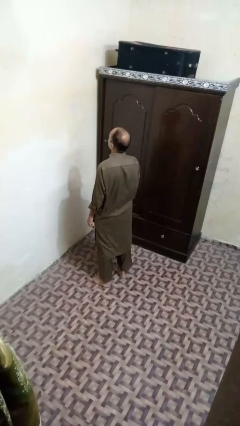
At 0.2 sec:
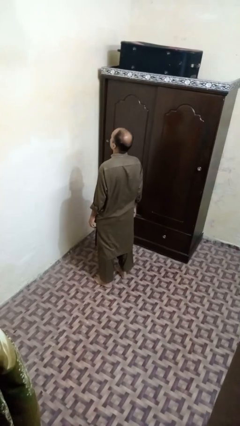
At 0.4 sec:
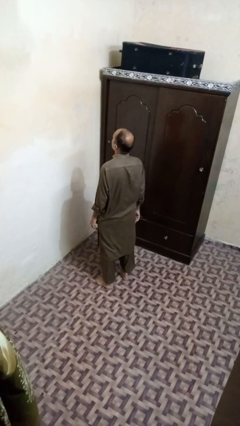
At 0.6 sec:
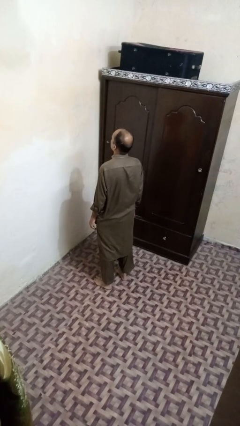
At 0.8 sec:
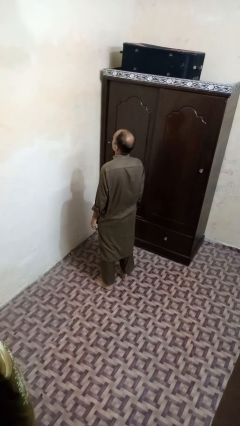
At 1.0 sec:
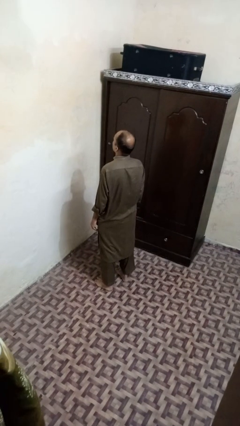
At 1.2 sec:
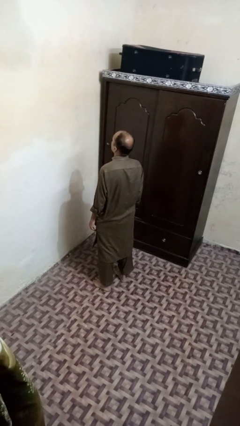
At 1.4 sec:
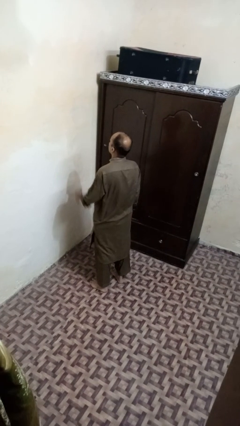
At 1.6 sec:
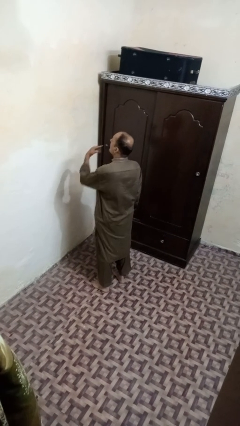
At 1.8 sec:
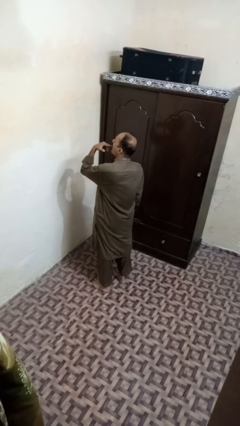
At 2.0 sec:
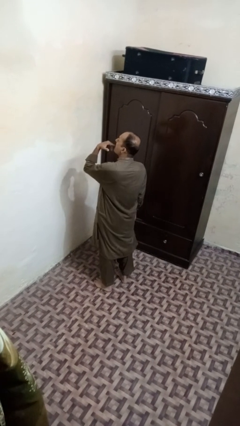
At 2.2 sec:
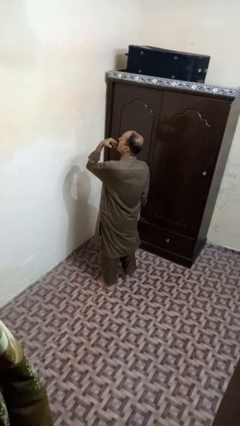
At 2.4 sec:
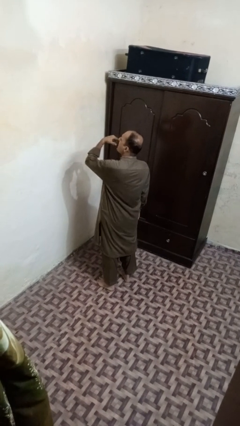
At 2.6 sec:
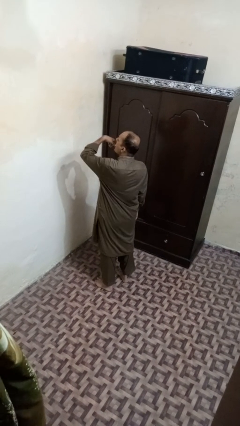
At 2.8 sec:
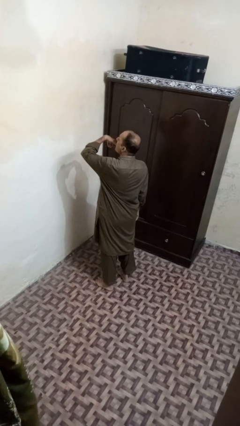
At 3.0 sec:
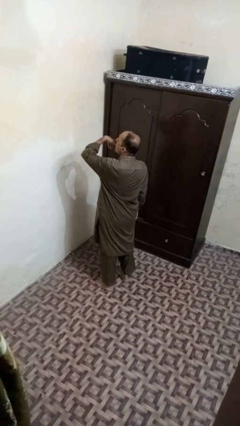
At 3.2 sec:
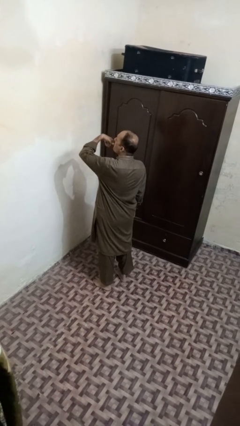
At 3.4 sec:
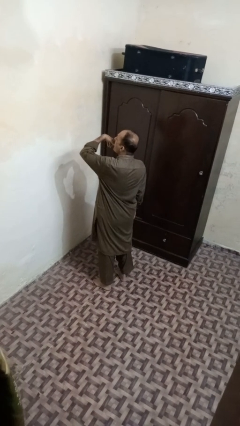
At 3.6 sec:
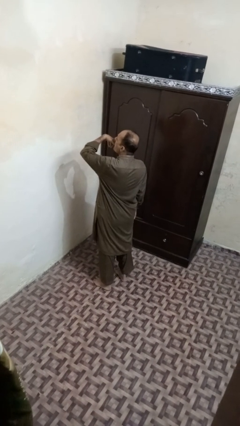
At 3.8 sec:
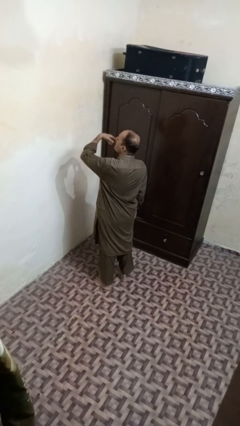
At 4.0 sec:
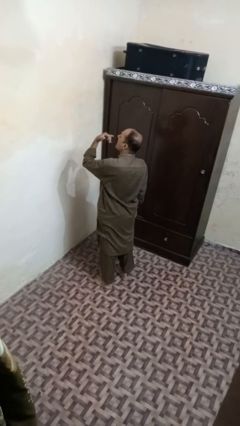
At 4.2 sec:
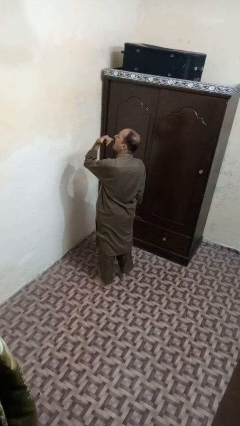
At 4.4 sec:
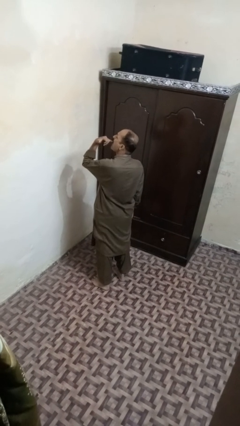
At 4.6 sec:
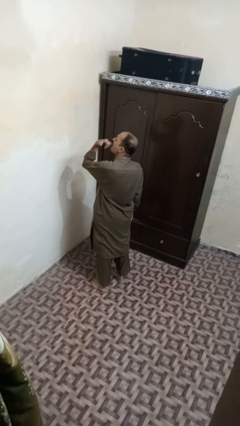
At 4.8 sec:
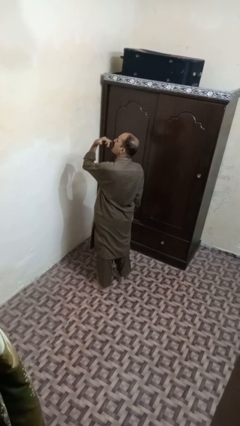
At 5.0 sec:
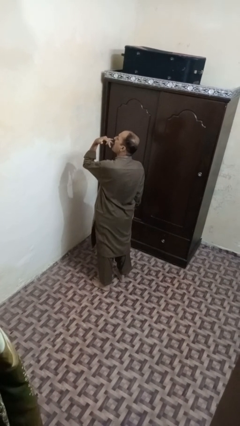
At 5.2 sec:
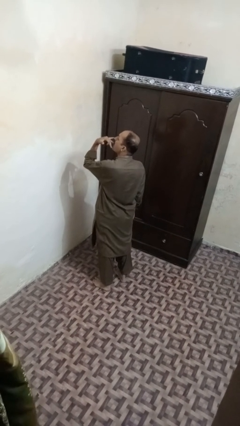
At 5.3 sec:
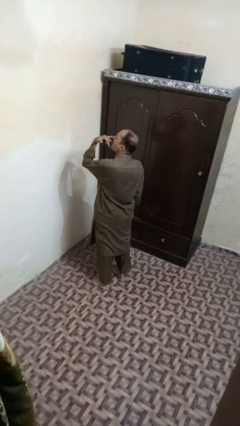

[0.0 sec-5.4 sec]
person licks fingers

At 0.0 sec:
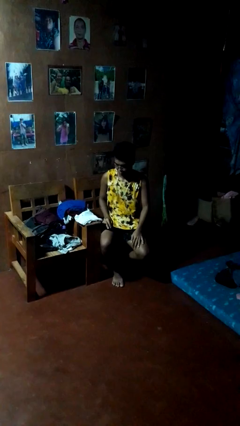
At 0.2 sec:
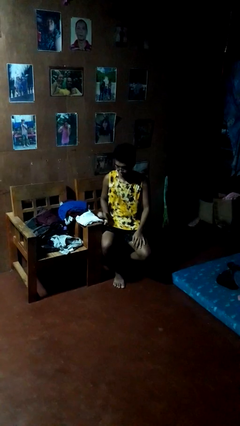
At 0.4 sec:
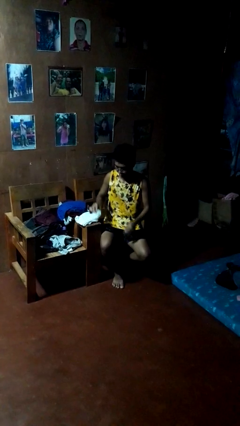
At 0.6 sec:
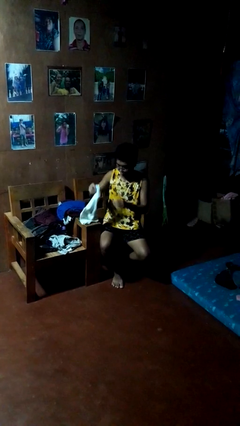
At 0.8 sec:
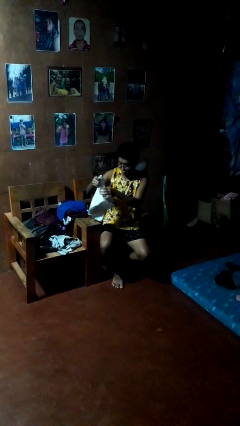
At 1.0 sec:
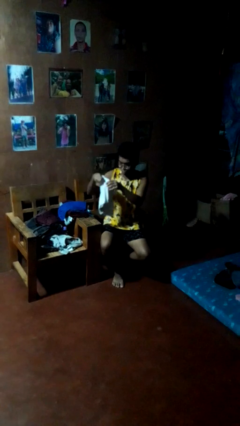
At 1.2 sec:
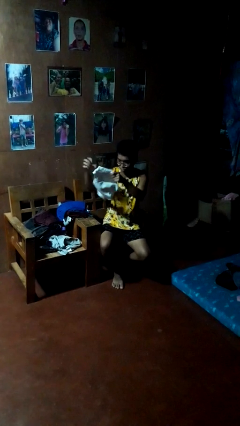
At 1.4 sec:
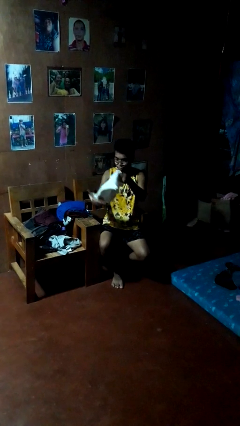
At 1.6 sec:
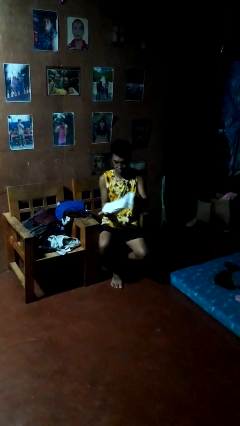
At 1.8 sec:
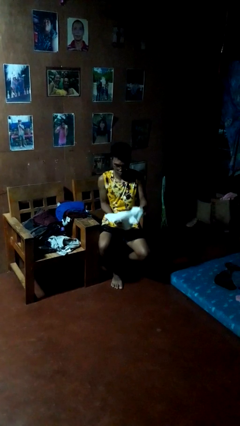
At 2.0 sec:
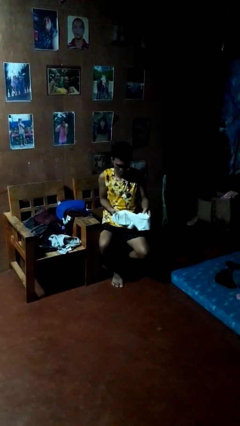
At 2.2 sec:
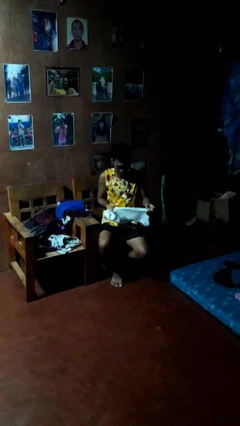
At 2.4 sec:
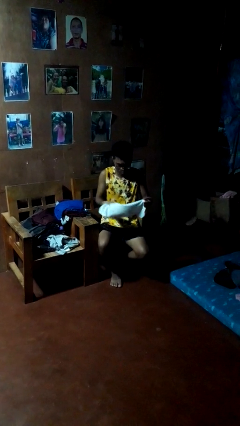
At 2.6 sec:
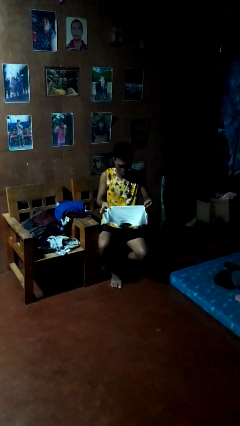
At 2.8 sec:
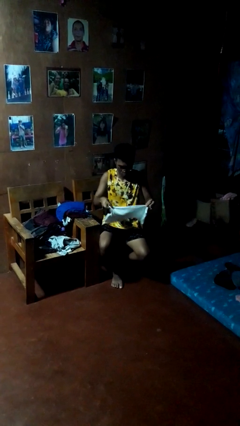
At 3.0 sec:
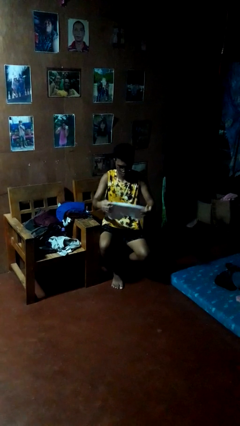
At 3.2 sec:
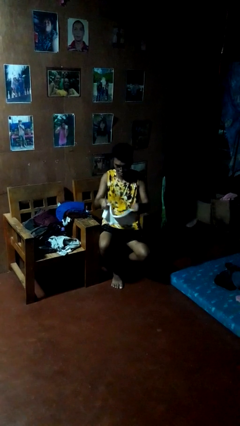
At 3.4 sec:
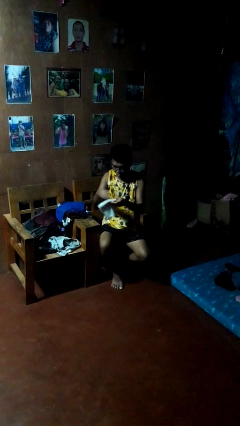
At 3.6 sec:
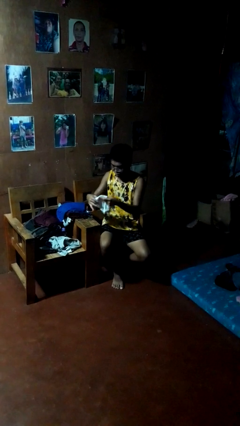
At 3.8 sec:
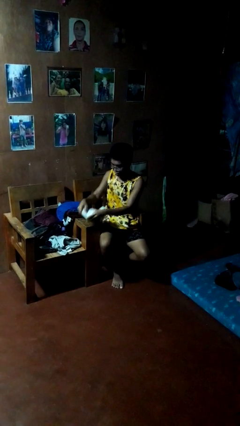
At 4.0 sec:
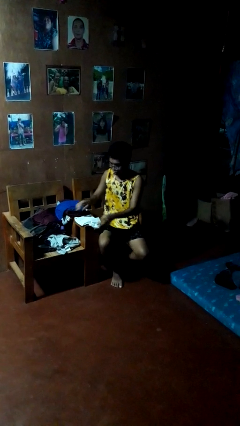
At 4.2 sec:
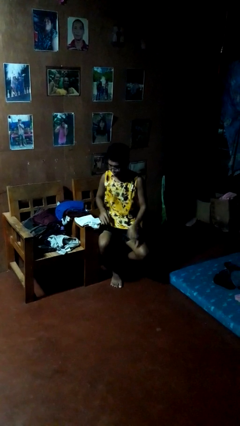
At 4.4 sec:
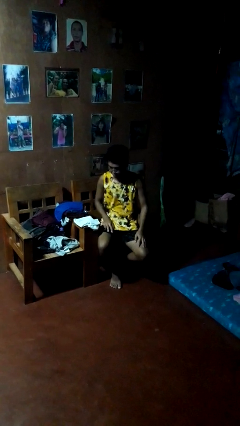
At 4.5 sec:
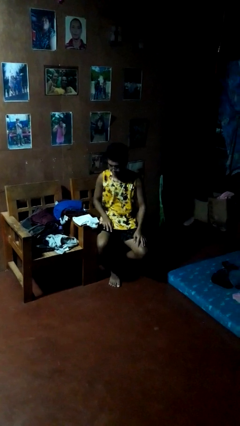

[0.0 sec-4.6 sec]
person folds shirt

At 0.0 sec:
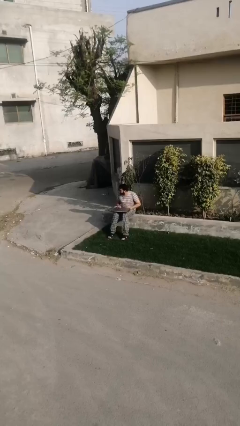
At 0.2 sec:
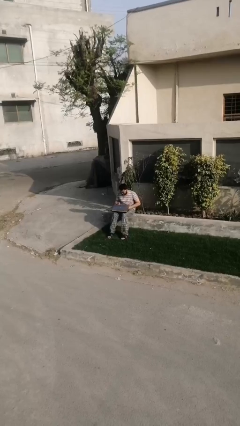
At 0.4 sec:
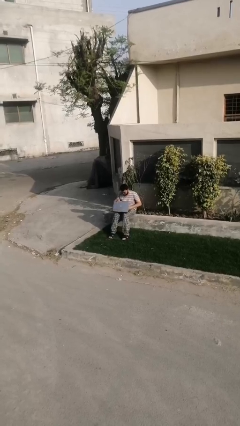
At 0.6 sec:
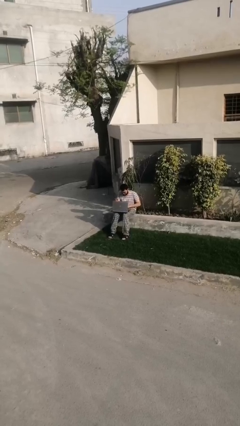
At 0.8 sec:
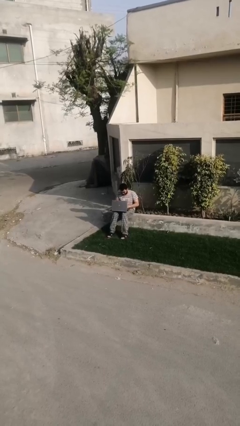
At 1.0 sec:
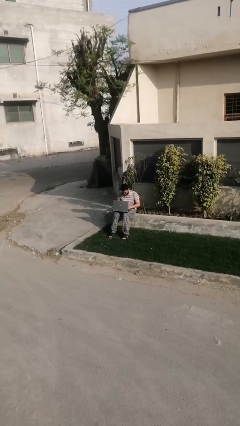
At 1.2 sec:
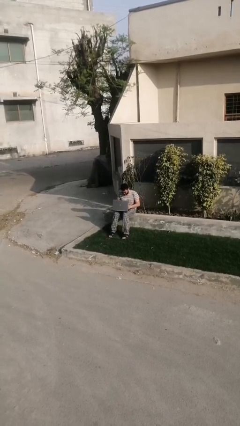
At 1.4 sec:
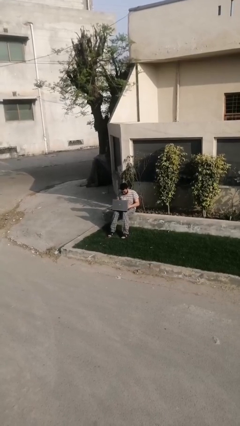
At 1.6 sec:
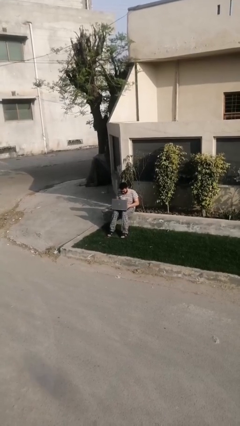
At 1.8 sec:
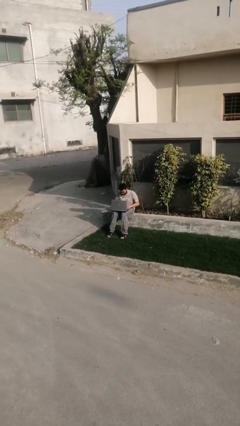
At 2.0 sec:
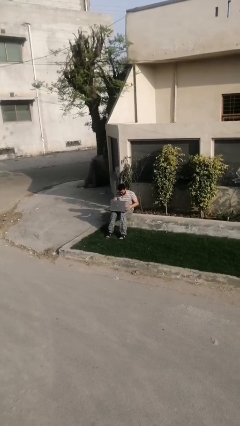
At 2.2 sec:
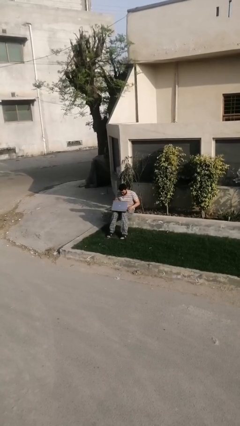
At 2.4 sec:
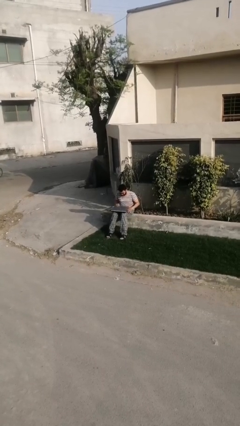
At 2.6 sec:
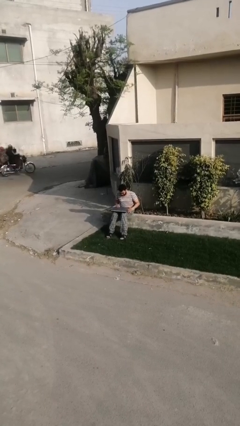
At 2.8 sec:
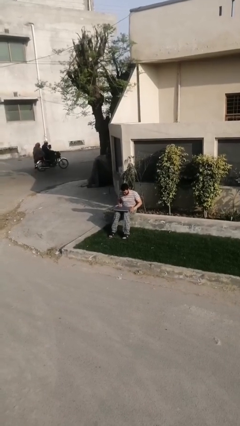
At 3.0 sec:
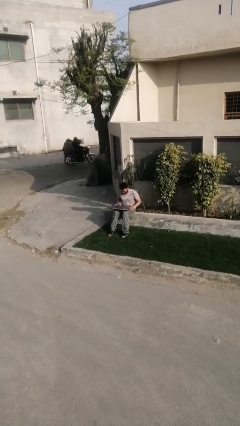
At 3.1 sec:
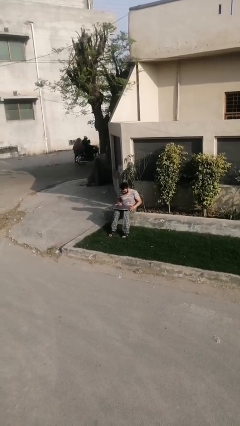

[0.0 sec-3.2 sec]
person interacts with laptop

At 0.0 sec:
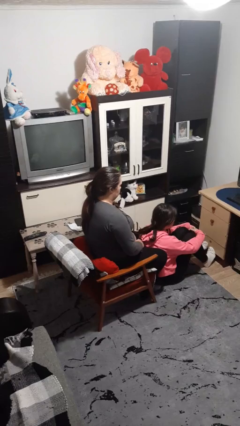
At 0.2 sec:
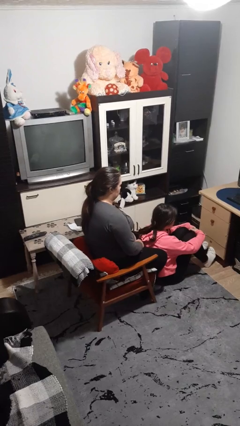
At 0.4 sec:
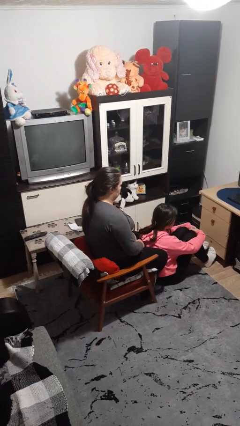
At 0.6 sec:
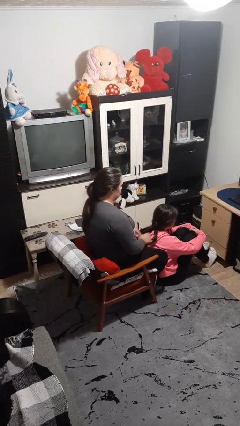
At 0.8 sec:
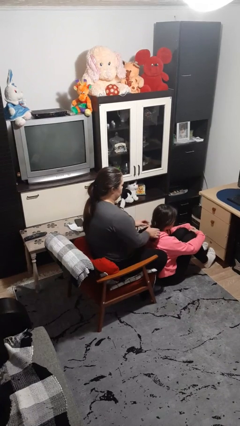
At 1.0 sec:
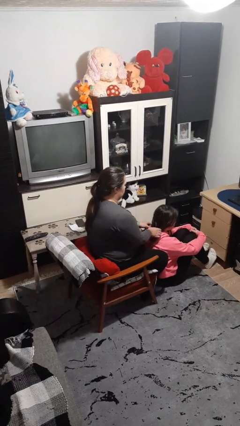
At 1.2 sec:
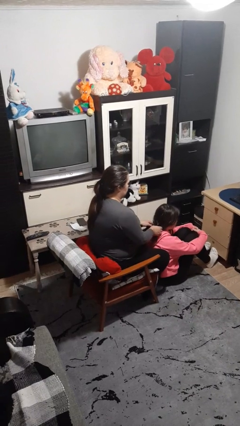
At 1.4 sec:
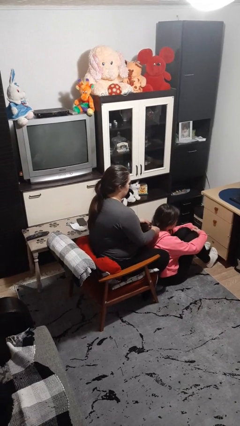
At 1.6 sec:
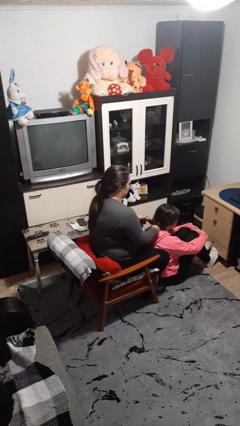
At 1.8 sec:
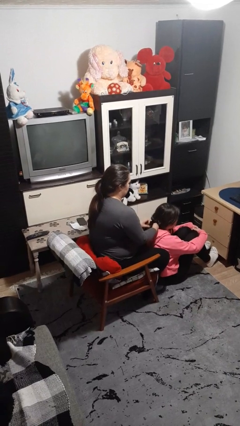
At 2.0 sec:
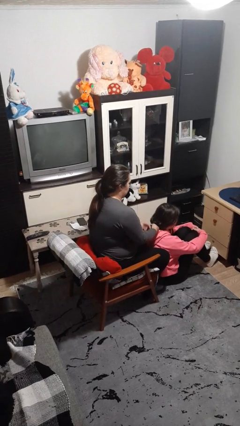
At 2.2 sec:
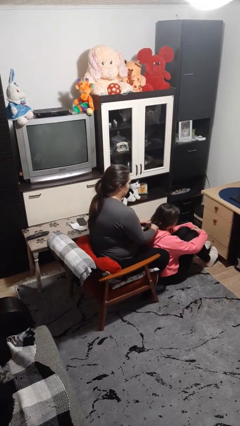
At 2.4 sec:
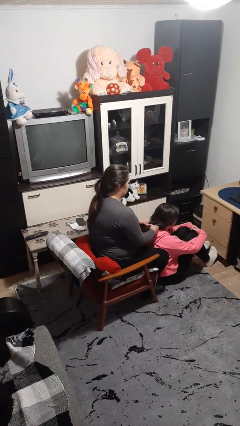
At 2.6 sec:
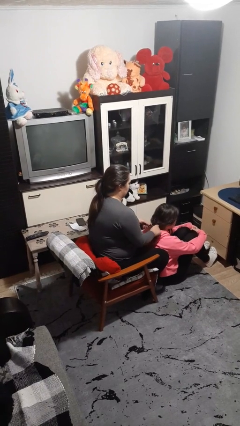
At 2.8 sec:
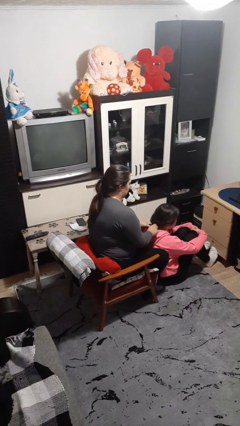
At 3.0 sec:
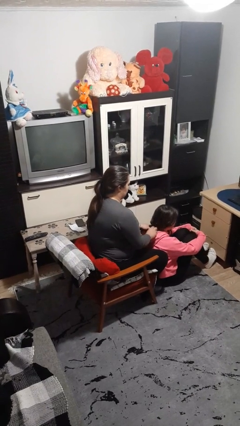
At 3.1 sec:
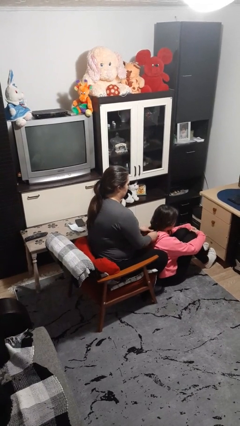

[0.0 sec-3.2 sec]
person braids hair of person

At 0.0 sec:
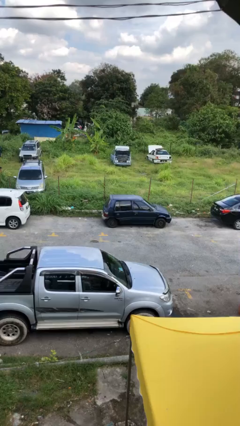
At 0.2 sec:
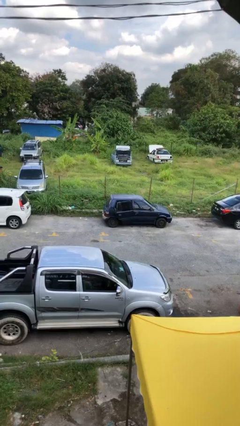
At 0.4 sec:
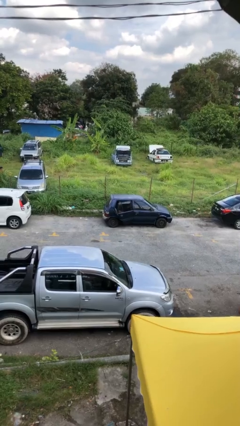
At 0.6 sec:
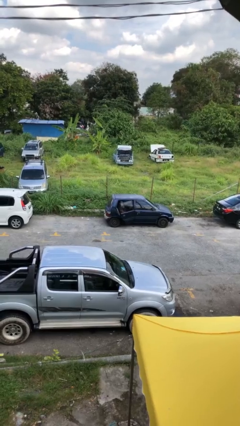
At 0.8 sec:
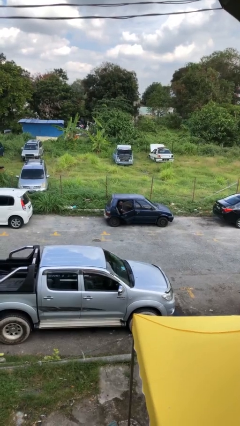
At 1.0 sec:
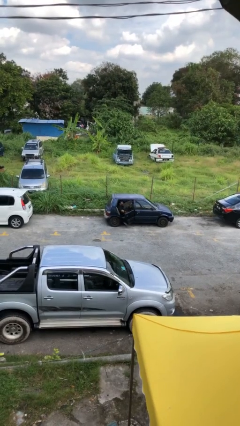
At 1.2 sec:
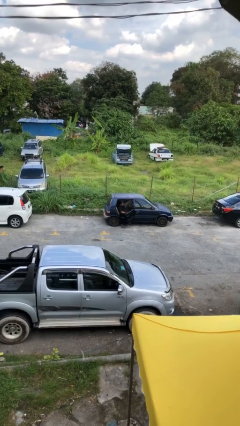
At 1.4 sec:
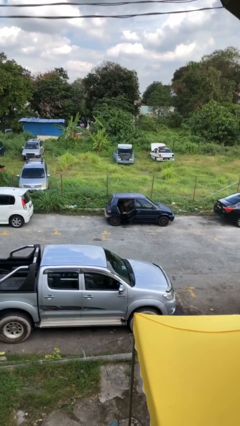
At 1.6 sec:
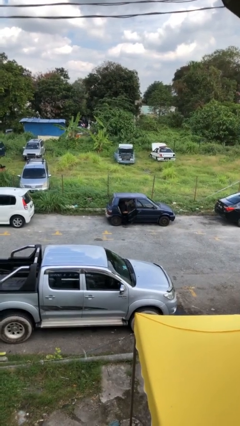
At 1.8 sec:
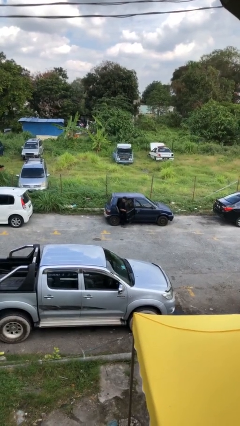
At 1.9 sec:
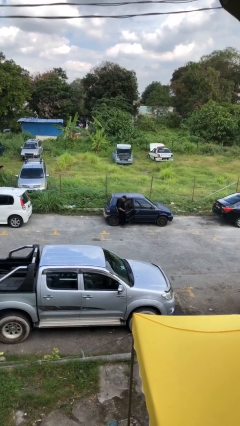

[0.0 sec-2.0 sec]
person opens car door
